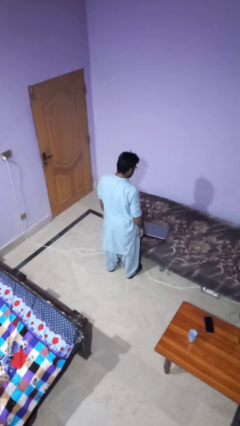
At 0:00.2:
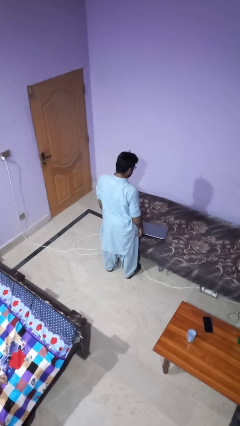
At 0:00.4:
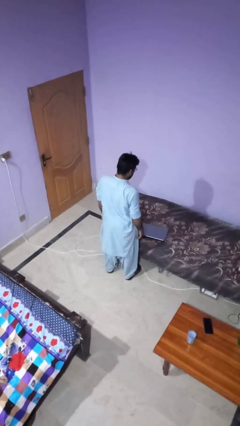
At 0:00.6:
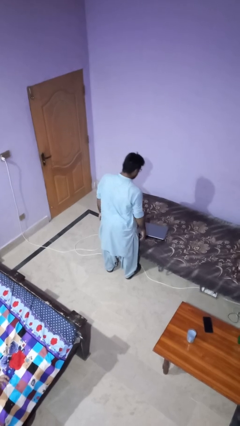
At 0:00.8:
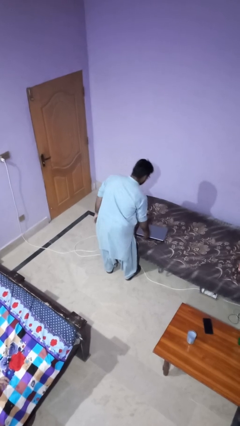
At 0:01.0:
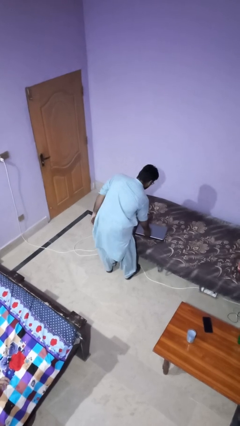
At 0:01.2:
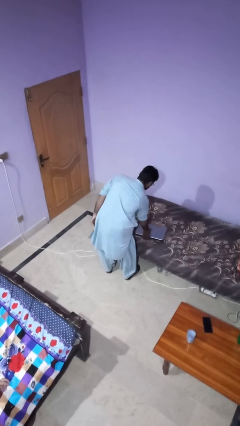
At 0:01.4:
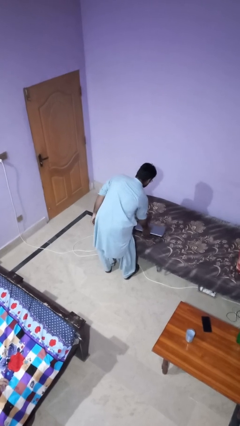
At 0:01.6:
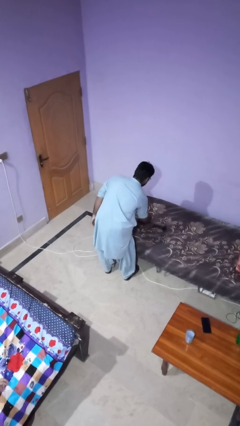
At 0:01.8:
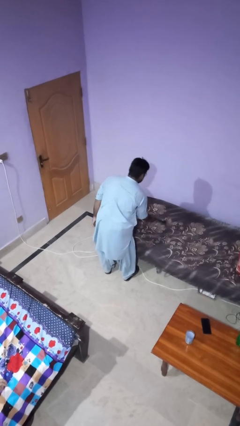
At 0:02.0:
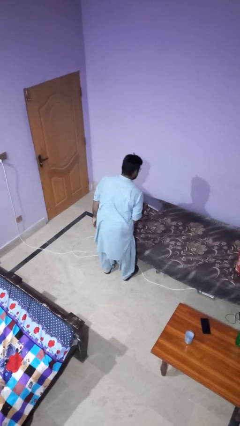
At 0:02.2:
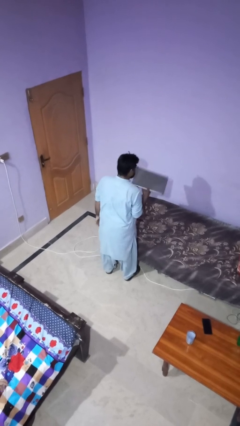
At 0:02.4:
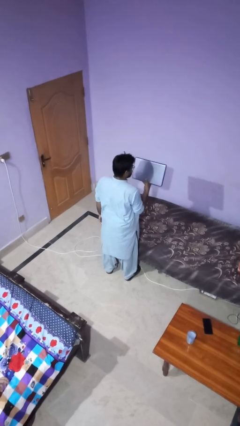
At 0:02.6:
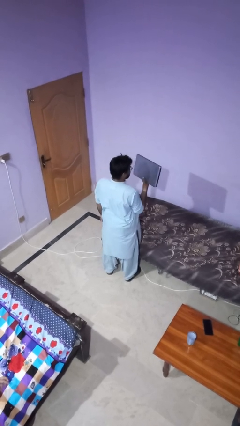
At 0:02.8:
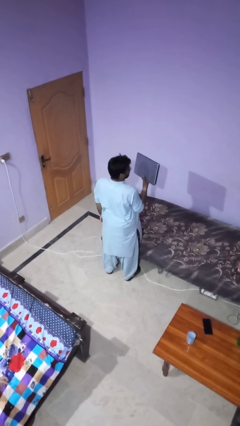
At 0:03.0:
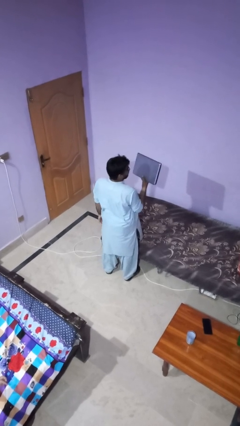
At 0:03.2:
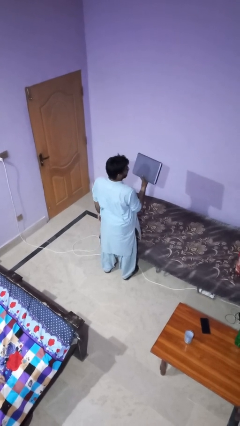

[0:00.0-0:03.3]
person picks up object from bed

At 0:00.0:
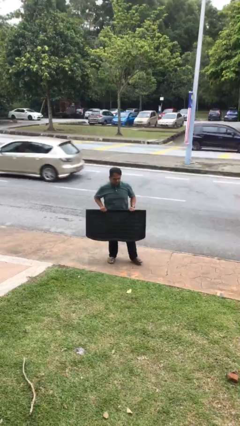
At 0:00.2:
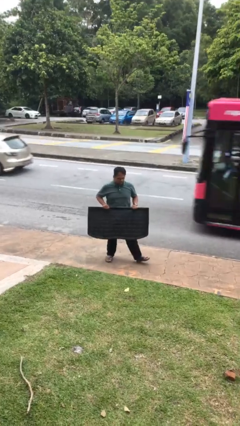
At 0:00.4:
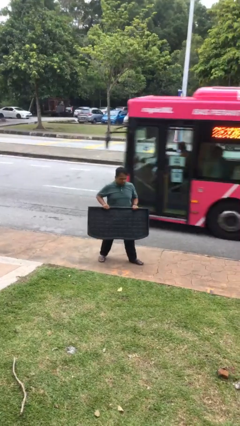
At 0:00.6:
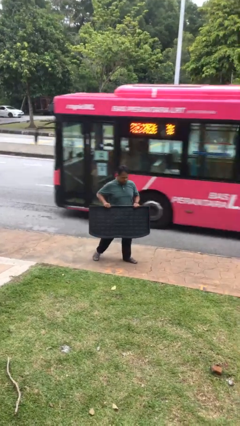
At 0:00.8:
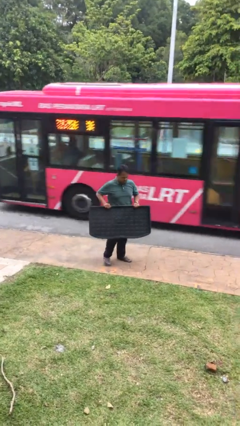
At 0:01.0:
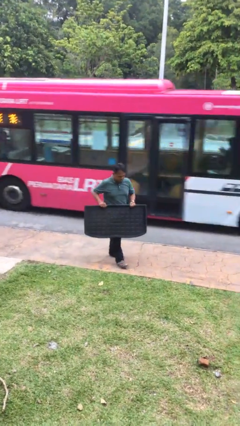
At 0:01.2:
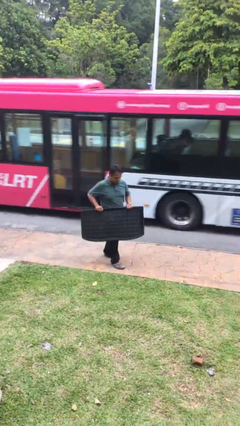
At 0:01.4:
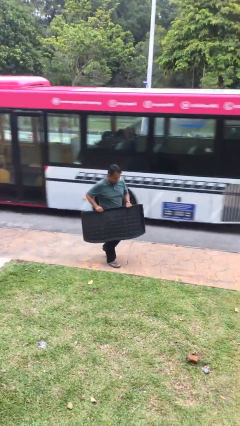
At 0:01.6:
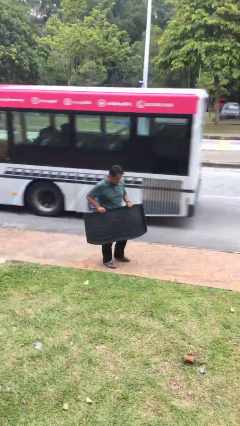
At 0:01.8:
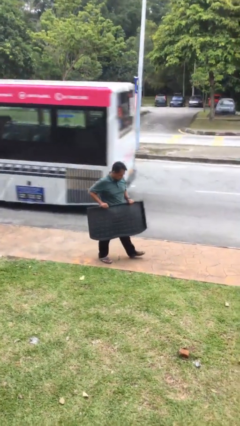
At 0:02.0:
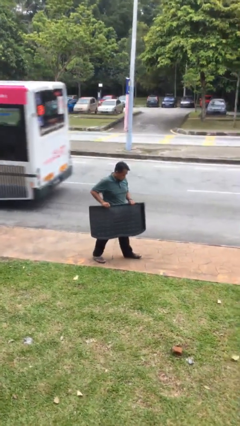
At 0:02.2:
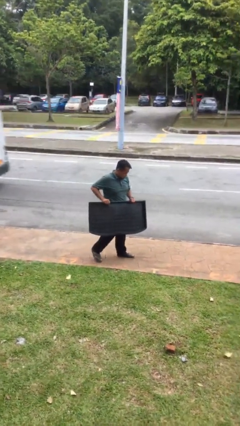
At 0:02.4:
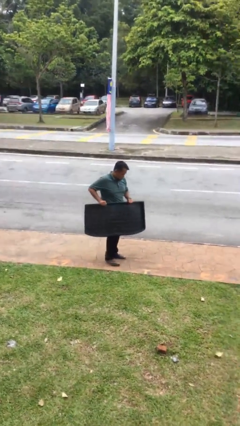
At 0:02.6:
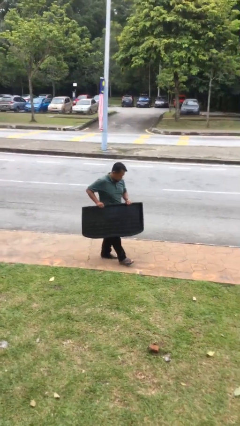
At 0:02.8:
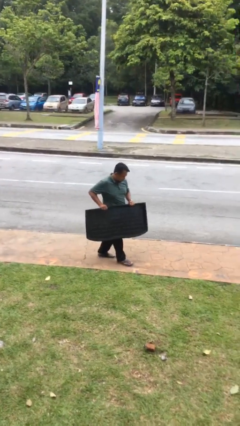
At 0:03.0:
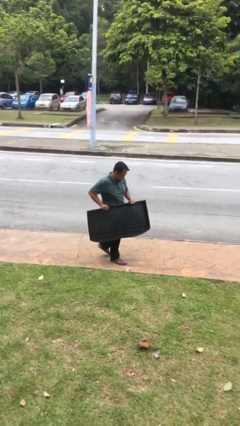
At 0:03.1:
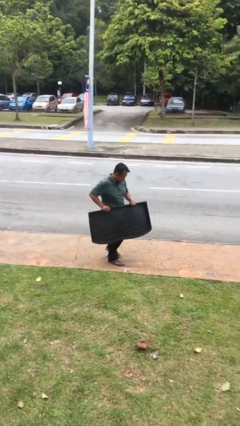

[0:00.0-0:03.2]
person carries heavy object

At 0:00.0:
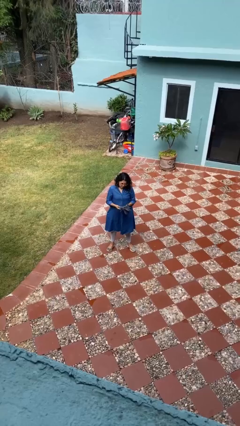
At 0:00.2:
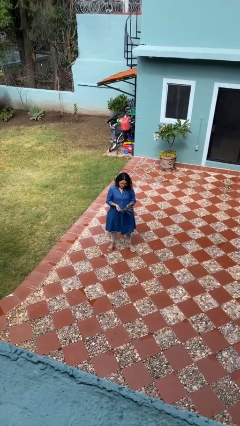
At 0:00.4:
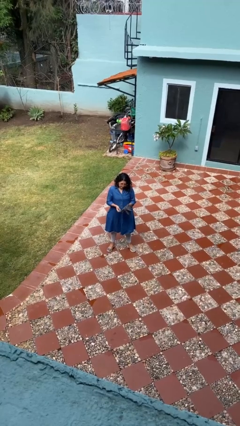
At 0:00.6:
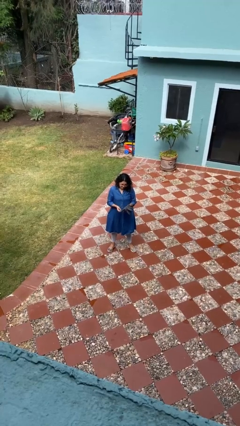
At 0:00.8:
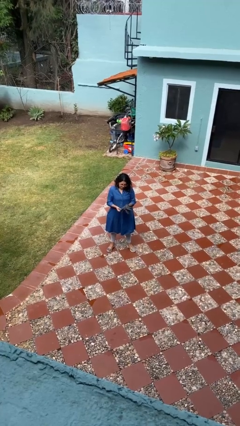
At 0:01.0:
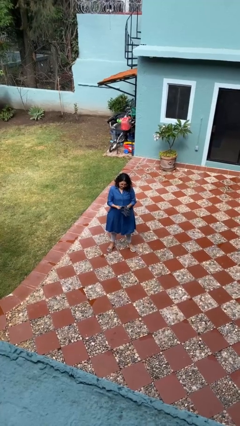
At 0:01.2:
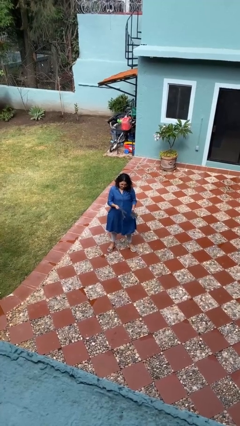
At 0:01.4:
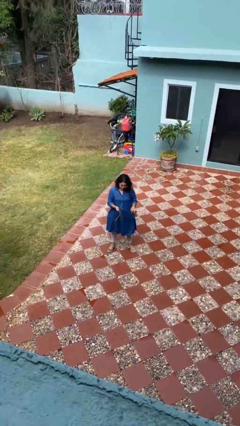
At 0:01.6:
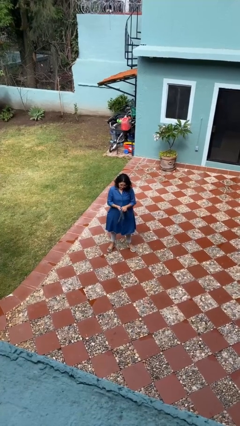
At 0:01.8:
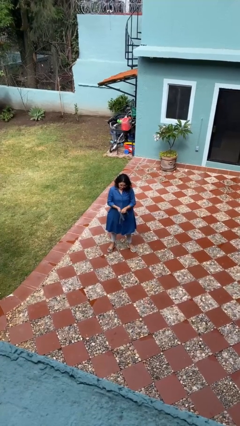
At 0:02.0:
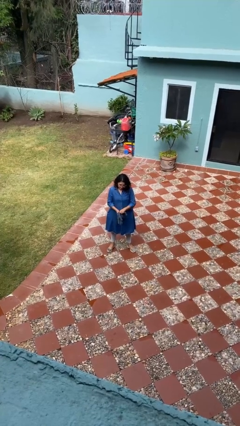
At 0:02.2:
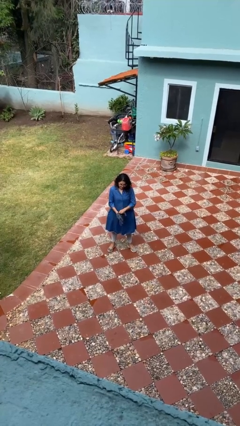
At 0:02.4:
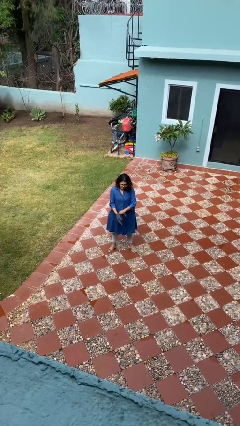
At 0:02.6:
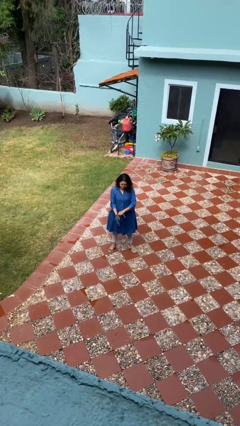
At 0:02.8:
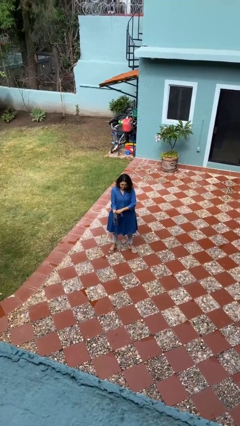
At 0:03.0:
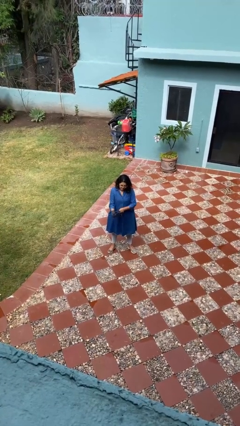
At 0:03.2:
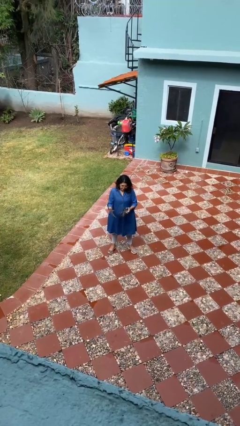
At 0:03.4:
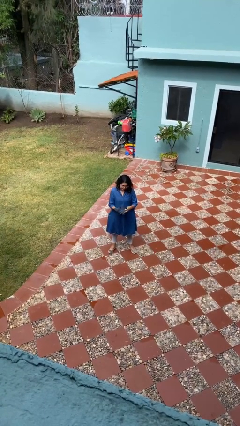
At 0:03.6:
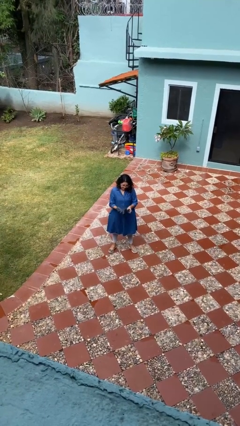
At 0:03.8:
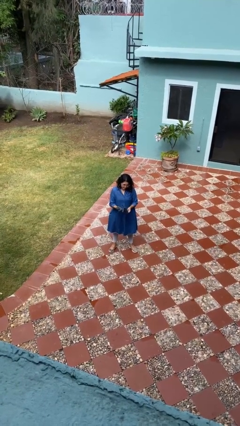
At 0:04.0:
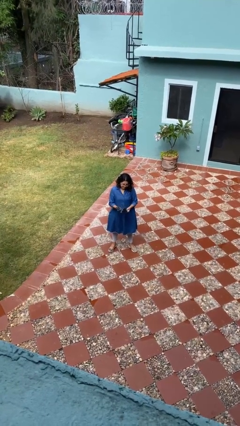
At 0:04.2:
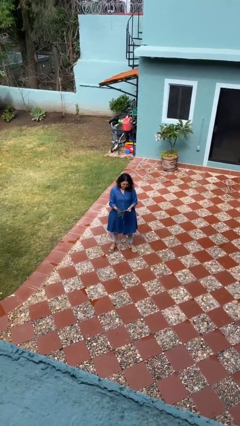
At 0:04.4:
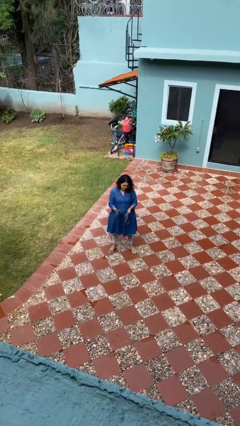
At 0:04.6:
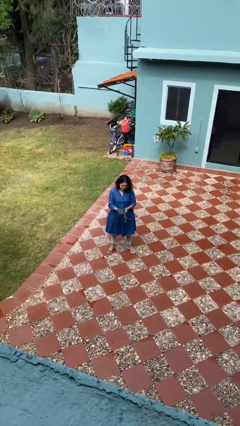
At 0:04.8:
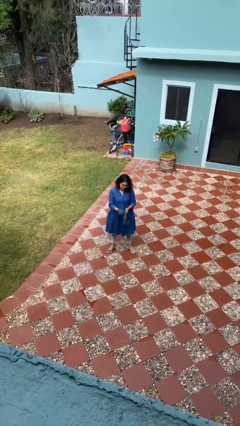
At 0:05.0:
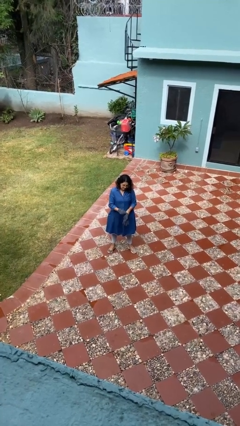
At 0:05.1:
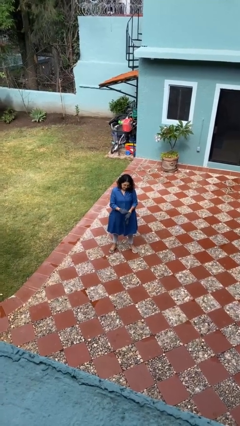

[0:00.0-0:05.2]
person puts on gloves

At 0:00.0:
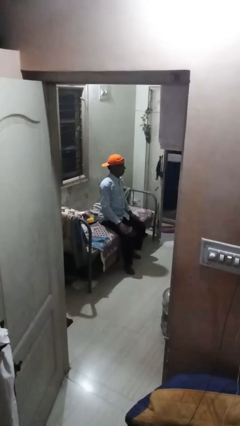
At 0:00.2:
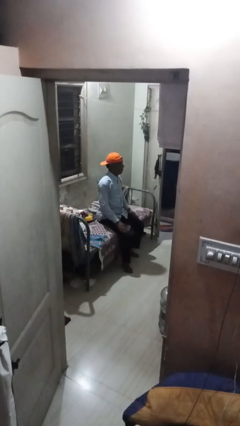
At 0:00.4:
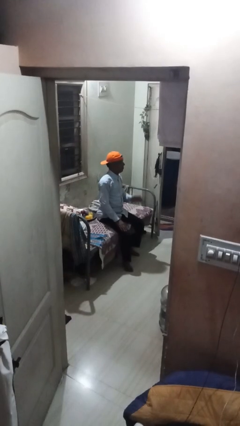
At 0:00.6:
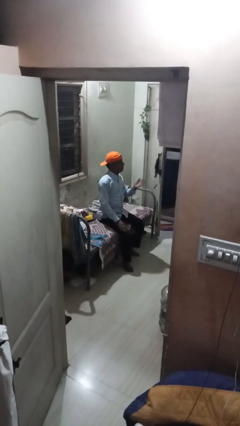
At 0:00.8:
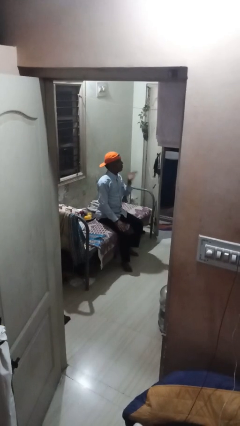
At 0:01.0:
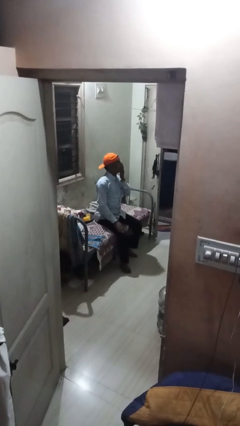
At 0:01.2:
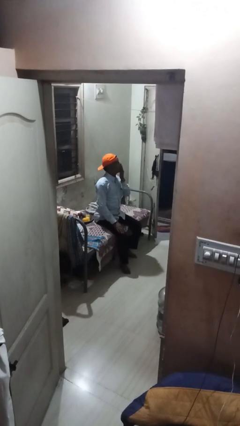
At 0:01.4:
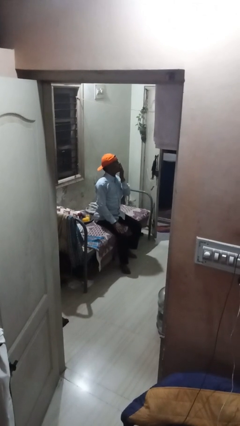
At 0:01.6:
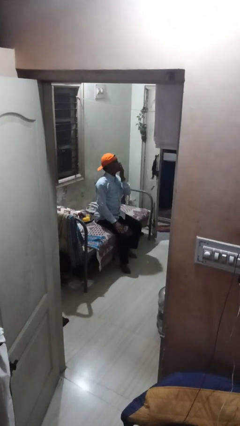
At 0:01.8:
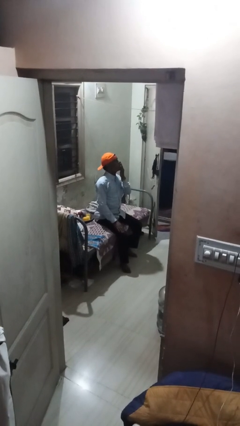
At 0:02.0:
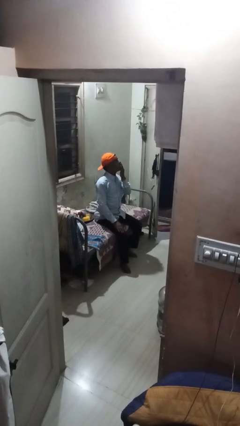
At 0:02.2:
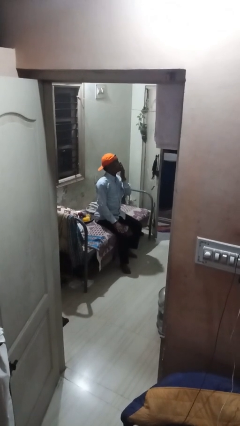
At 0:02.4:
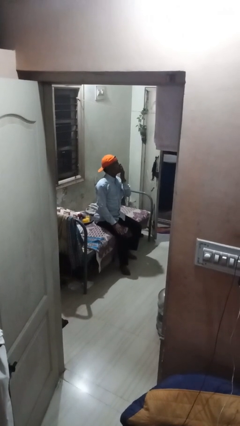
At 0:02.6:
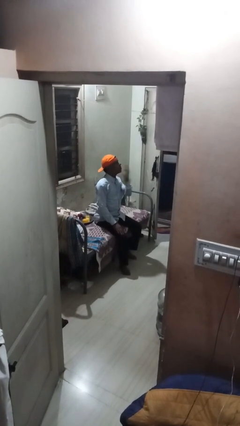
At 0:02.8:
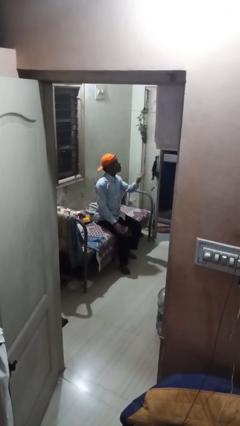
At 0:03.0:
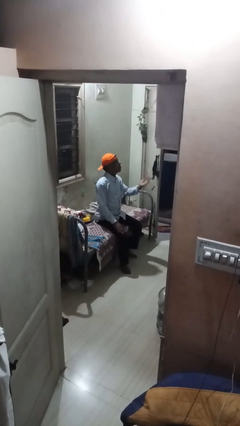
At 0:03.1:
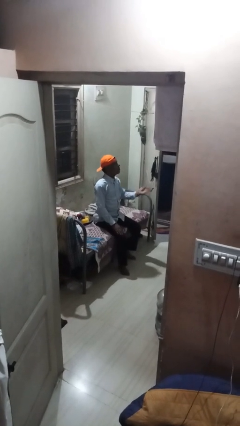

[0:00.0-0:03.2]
person gestures blow kiss

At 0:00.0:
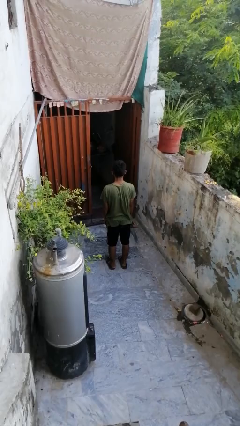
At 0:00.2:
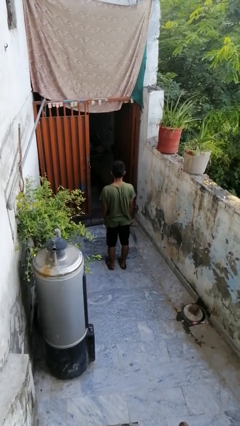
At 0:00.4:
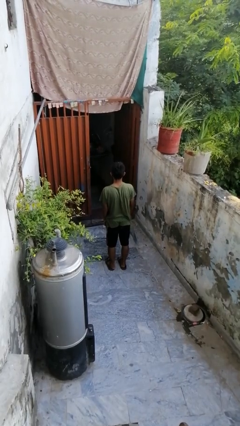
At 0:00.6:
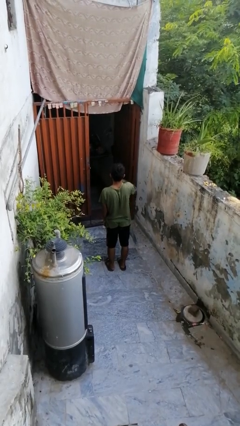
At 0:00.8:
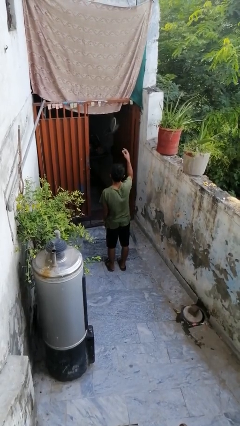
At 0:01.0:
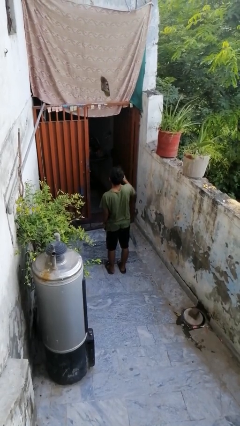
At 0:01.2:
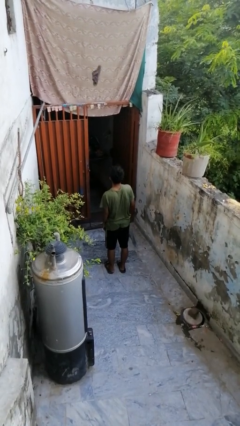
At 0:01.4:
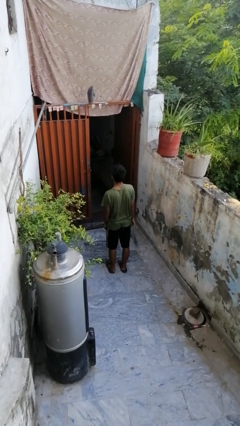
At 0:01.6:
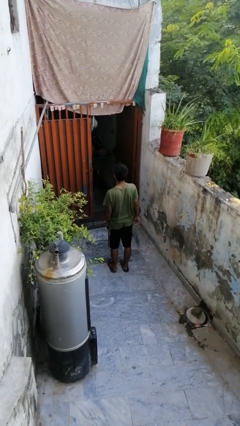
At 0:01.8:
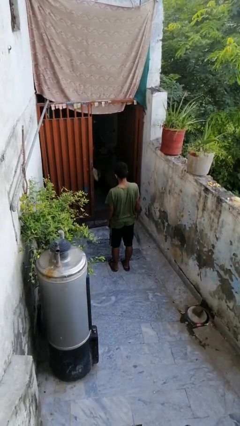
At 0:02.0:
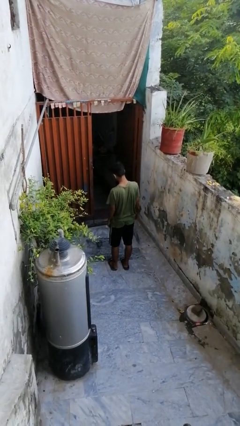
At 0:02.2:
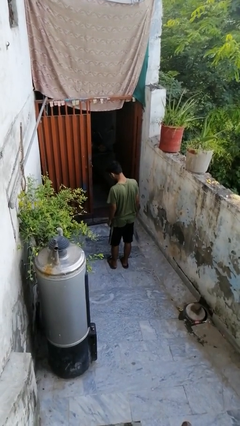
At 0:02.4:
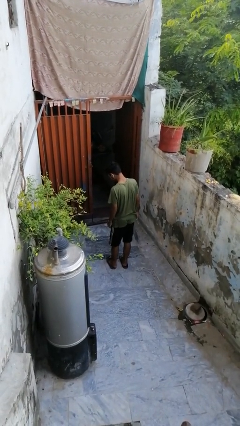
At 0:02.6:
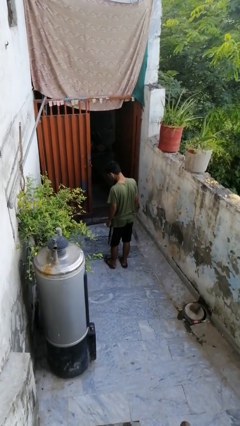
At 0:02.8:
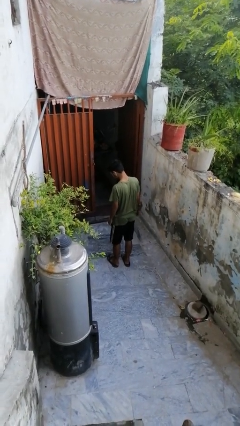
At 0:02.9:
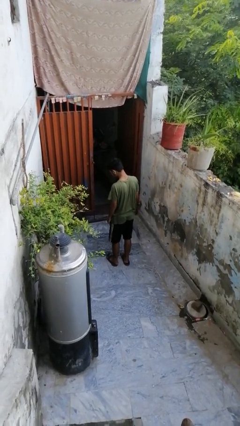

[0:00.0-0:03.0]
person throws object into air
